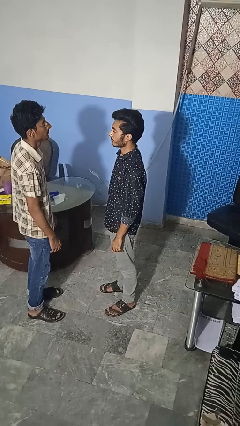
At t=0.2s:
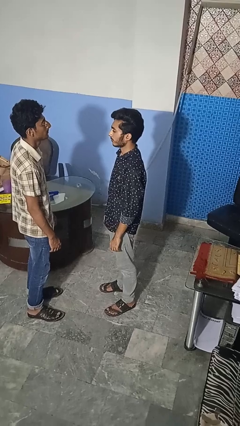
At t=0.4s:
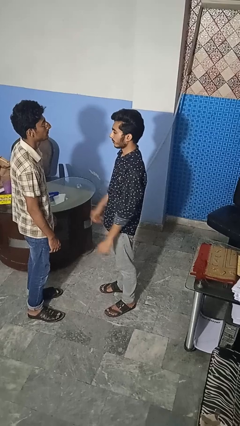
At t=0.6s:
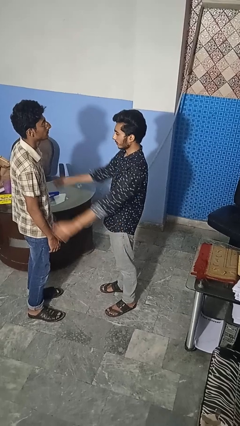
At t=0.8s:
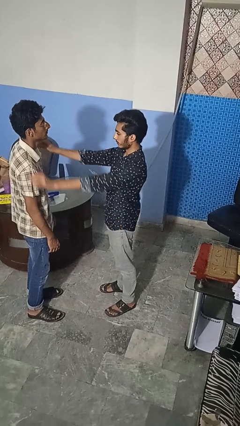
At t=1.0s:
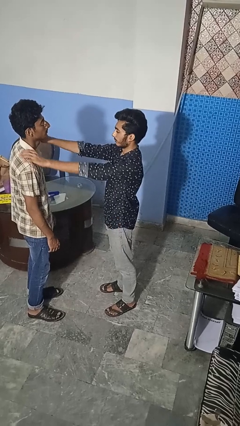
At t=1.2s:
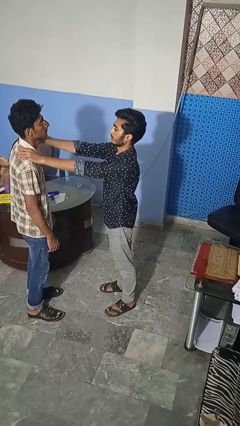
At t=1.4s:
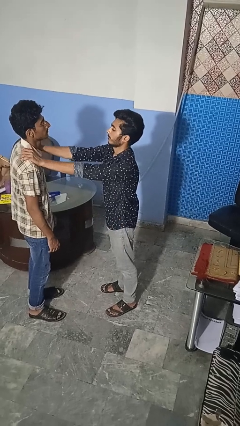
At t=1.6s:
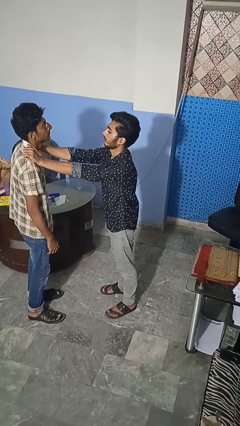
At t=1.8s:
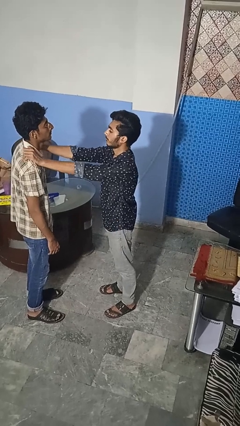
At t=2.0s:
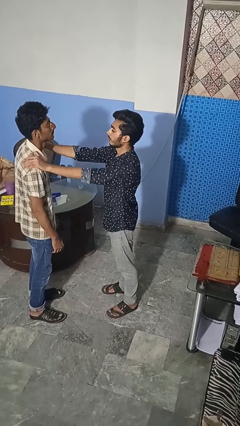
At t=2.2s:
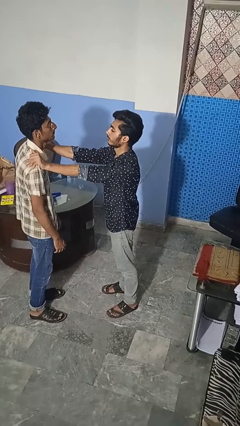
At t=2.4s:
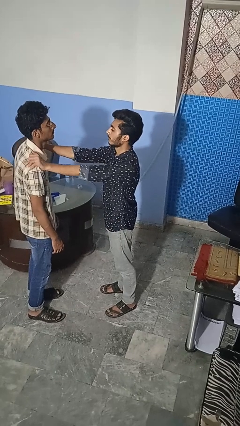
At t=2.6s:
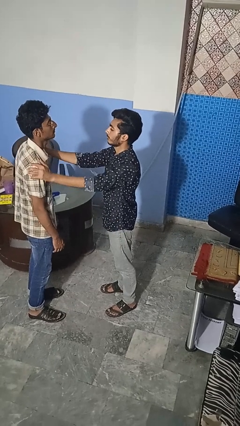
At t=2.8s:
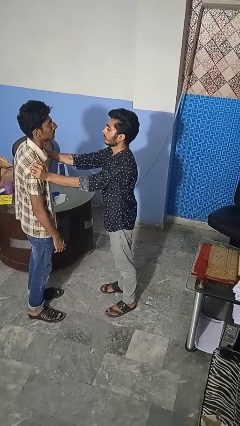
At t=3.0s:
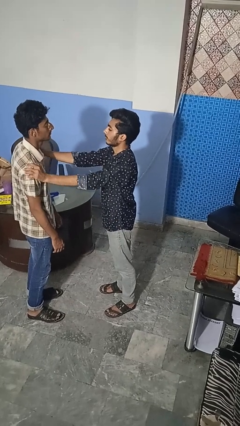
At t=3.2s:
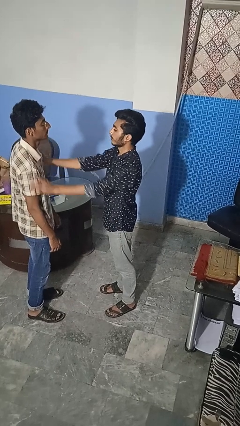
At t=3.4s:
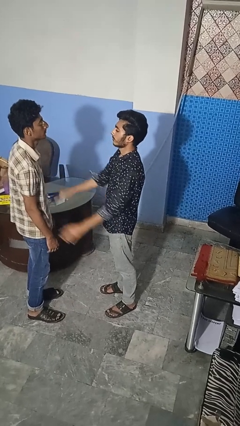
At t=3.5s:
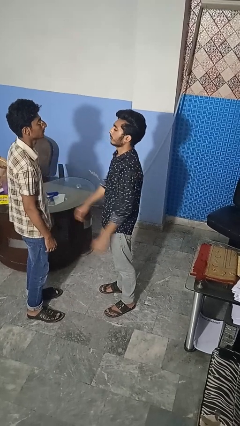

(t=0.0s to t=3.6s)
person pounds shoulders of person

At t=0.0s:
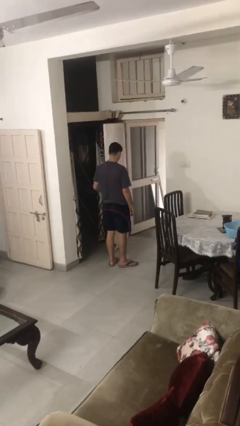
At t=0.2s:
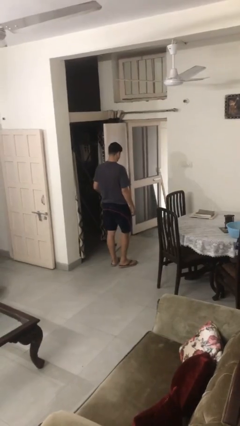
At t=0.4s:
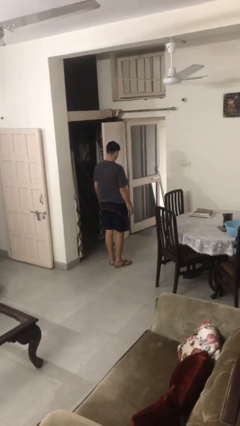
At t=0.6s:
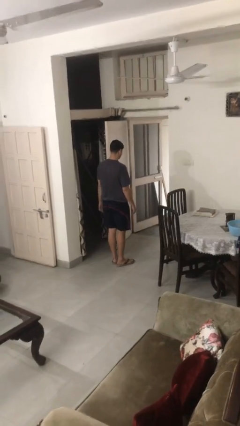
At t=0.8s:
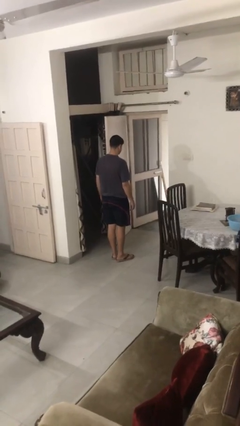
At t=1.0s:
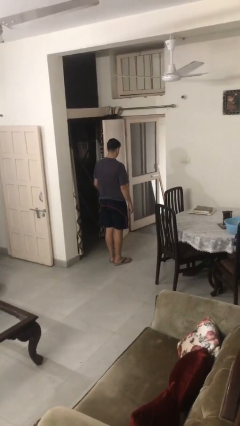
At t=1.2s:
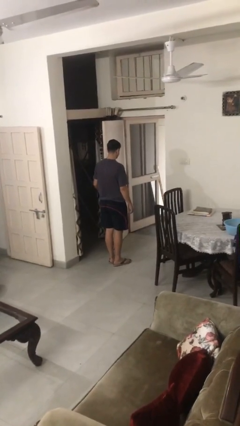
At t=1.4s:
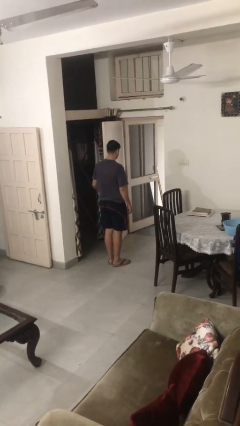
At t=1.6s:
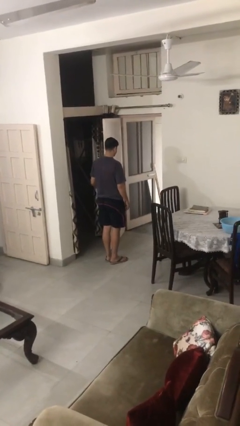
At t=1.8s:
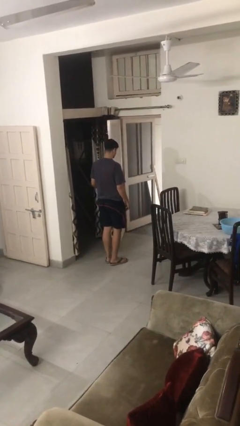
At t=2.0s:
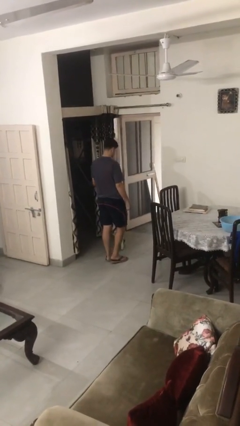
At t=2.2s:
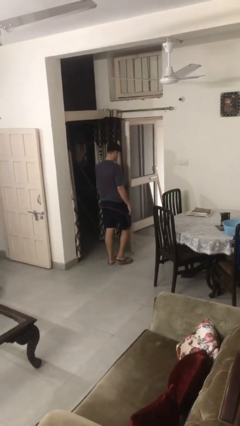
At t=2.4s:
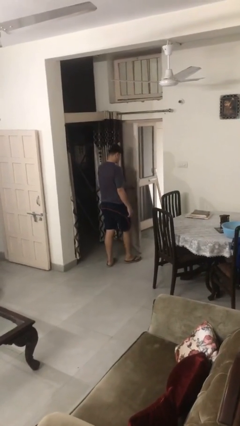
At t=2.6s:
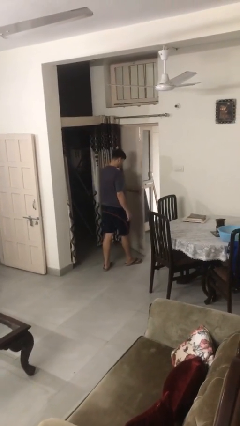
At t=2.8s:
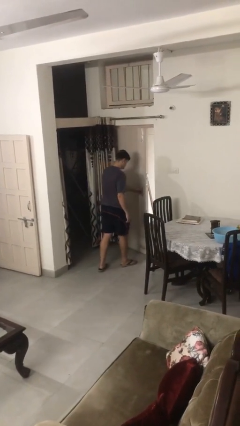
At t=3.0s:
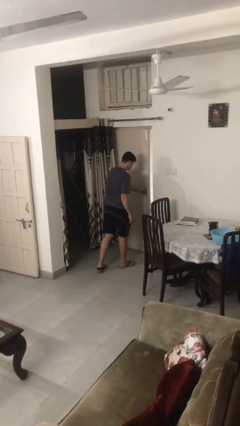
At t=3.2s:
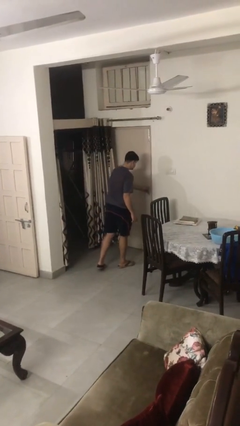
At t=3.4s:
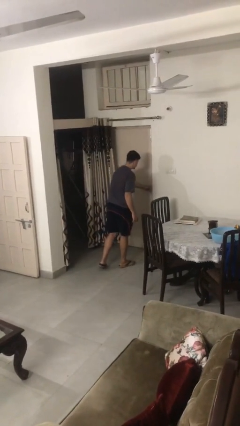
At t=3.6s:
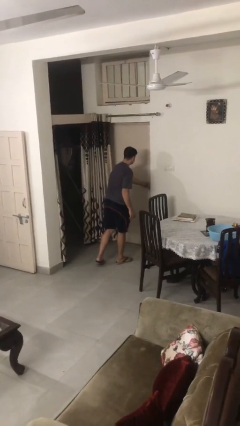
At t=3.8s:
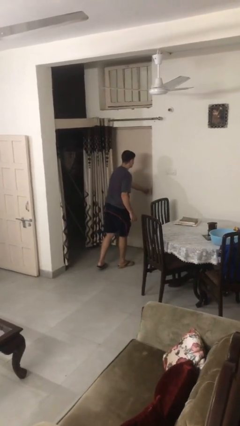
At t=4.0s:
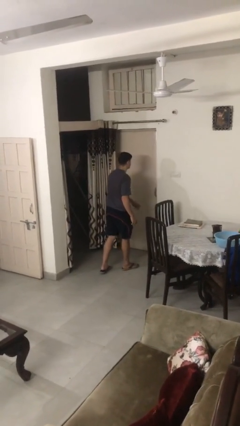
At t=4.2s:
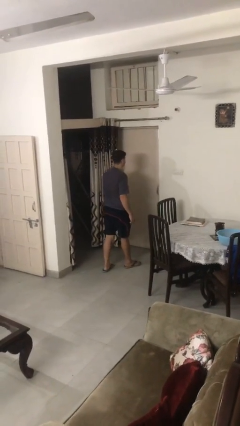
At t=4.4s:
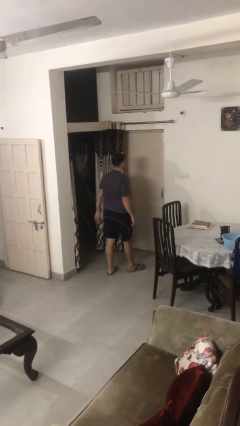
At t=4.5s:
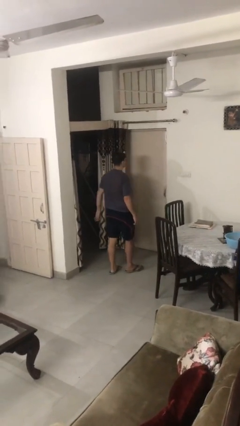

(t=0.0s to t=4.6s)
person closes facility door

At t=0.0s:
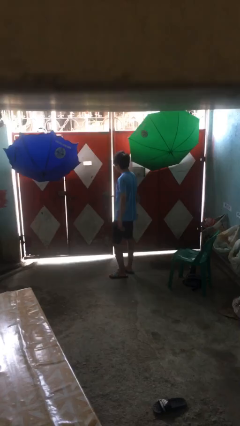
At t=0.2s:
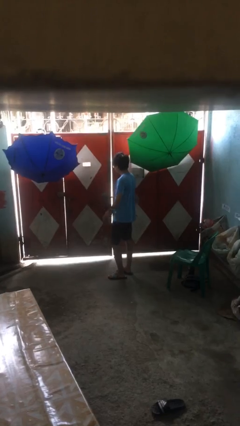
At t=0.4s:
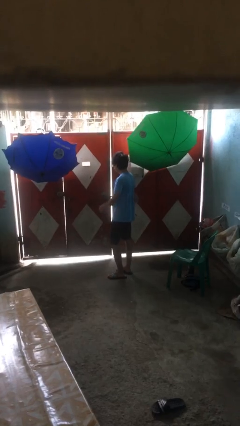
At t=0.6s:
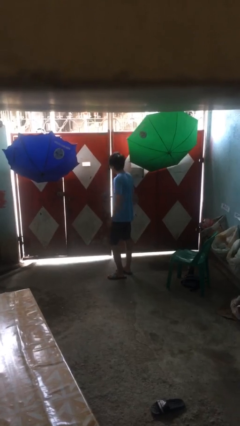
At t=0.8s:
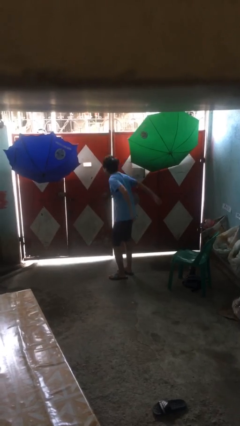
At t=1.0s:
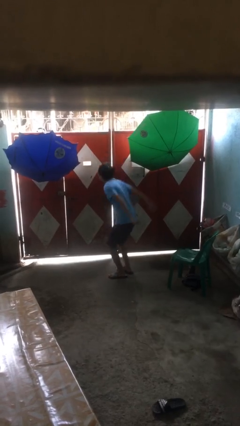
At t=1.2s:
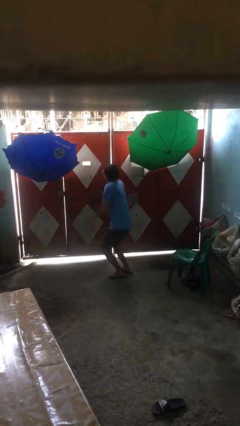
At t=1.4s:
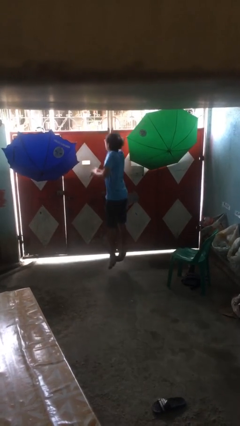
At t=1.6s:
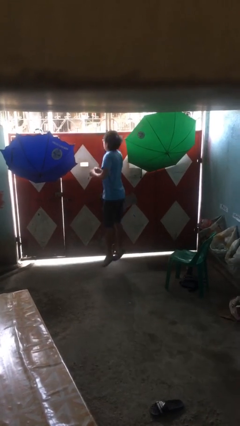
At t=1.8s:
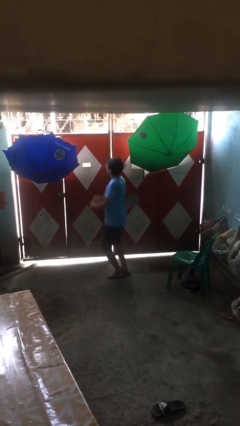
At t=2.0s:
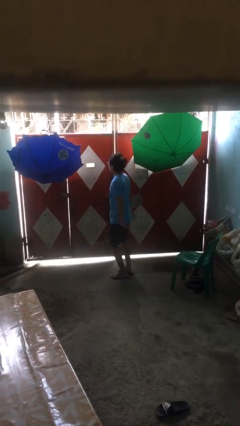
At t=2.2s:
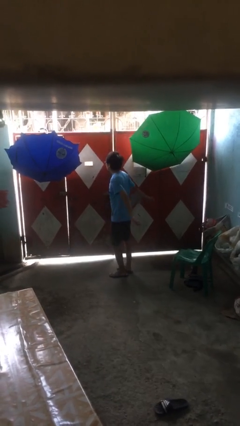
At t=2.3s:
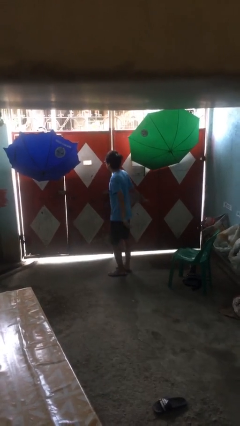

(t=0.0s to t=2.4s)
person jumps

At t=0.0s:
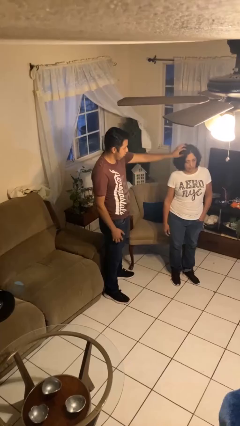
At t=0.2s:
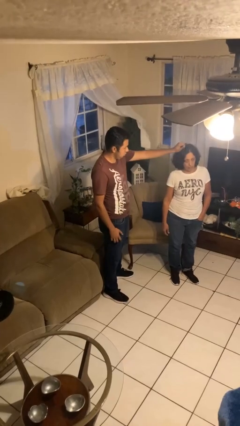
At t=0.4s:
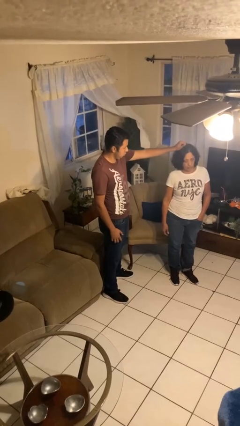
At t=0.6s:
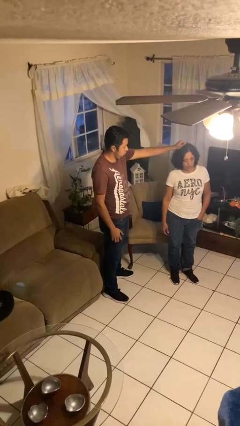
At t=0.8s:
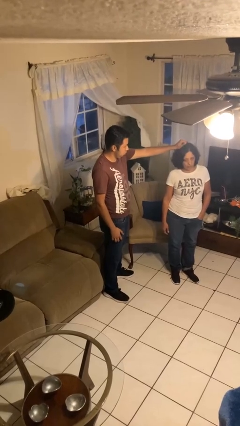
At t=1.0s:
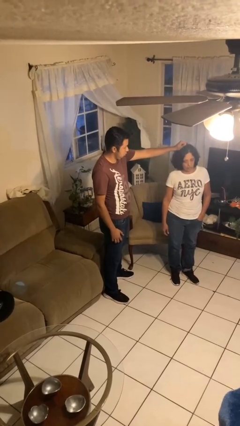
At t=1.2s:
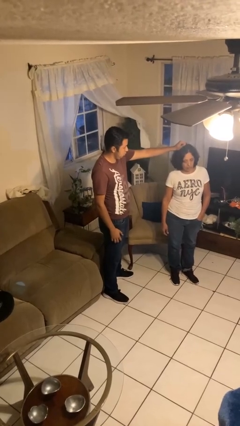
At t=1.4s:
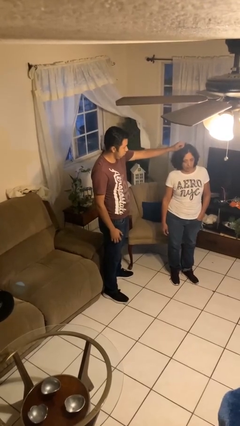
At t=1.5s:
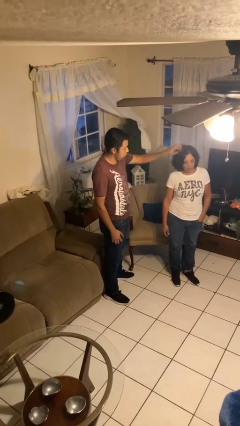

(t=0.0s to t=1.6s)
person grabs person by hair

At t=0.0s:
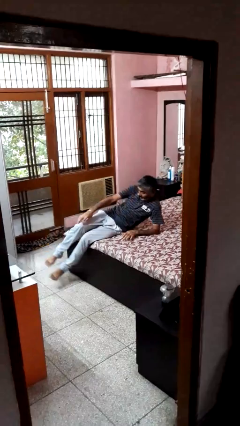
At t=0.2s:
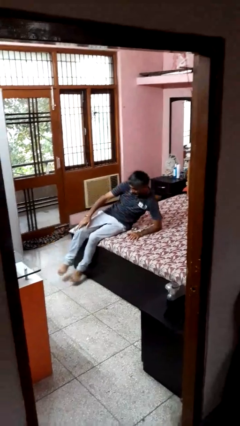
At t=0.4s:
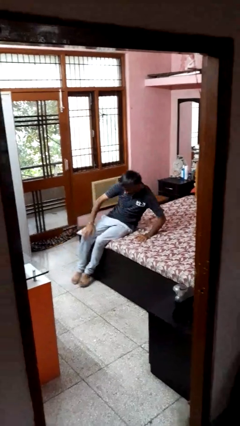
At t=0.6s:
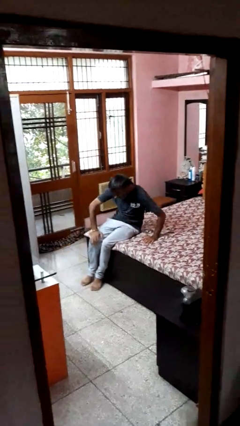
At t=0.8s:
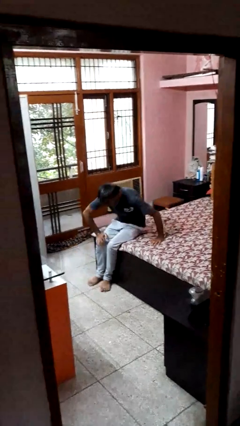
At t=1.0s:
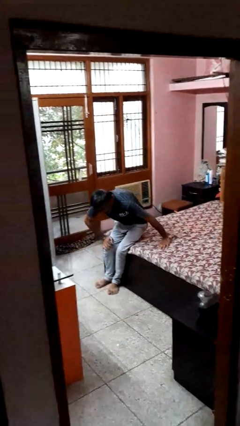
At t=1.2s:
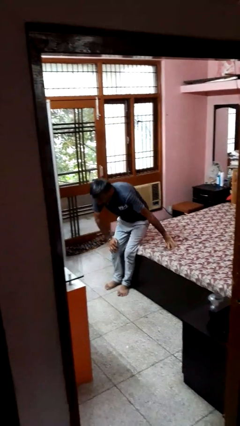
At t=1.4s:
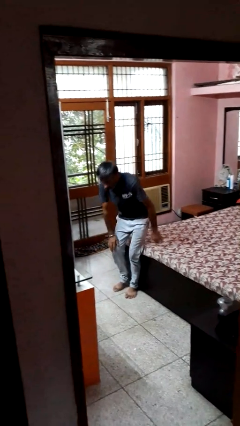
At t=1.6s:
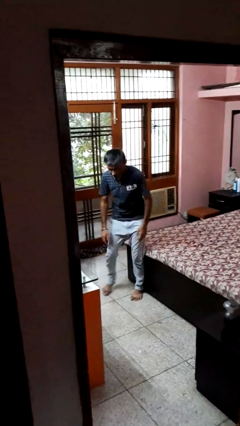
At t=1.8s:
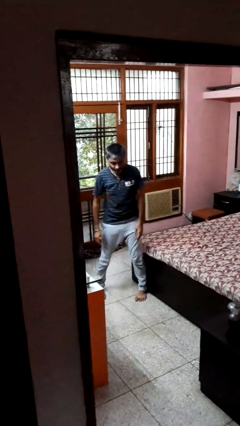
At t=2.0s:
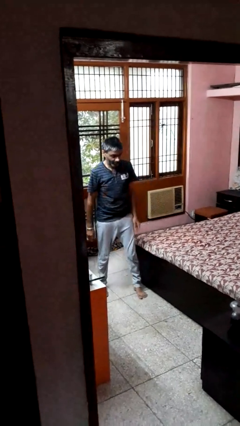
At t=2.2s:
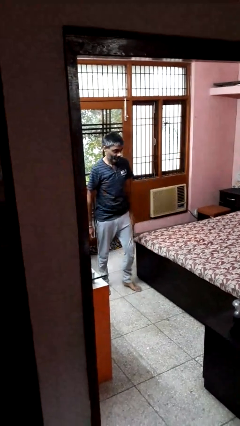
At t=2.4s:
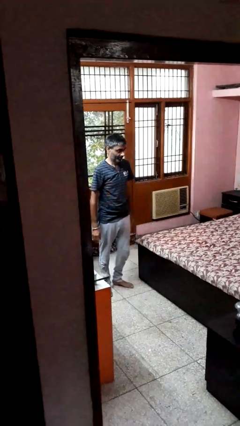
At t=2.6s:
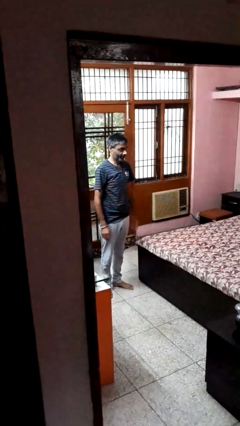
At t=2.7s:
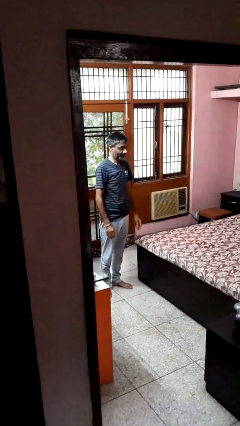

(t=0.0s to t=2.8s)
person stands up

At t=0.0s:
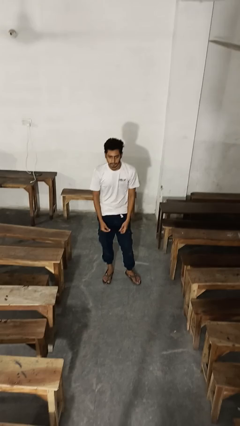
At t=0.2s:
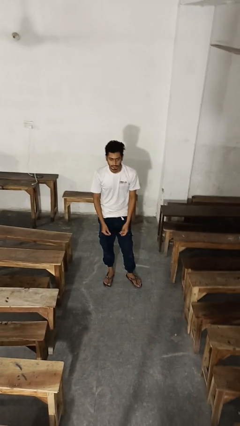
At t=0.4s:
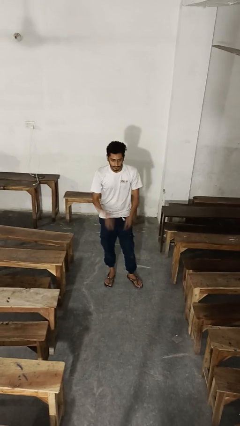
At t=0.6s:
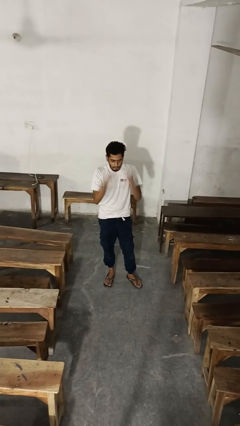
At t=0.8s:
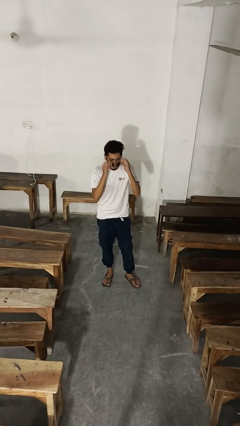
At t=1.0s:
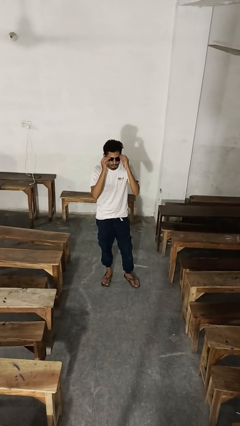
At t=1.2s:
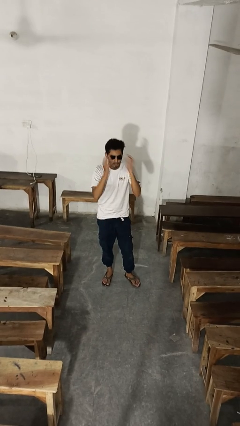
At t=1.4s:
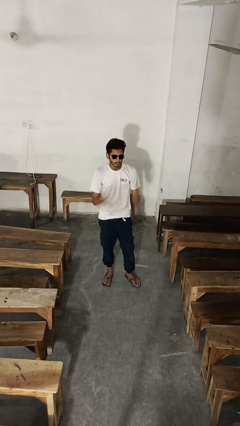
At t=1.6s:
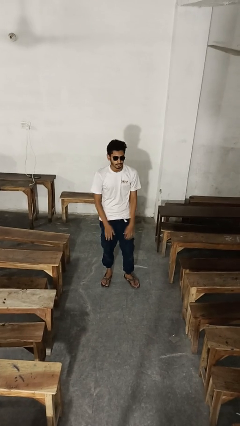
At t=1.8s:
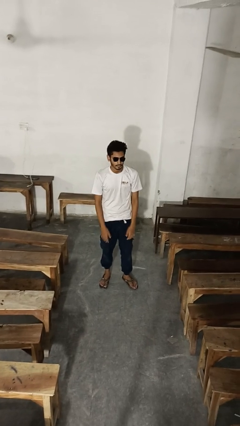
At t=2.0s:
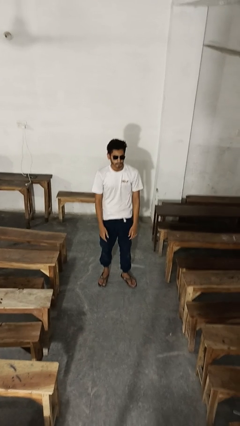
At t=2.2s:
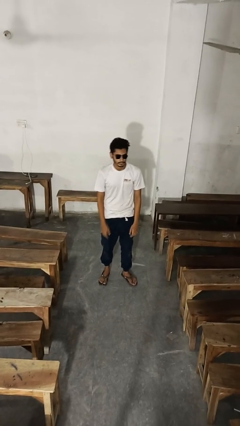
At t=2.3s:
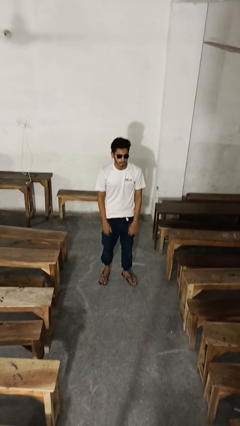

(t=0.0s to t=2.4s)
person puts on sunglasses
